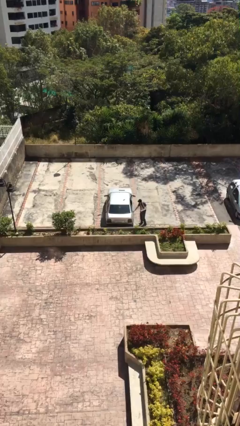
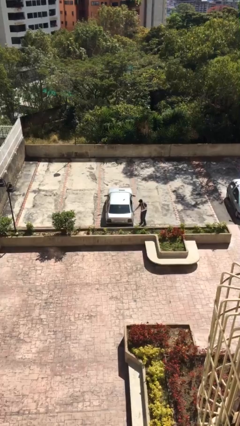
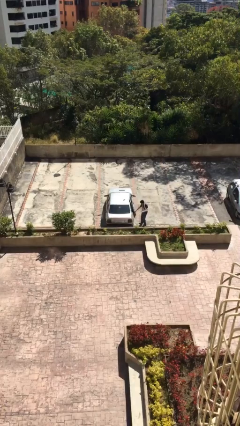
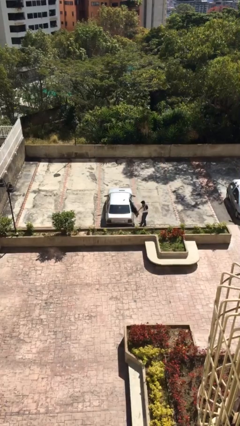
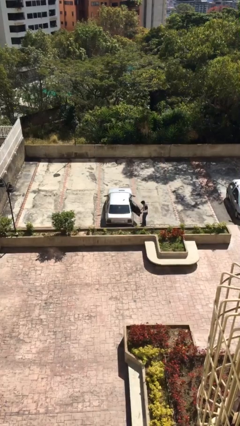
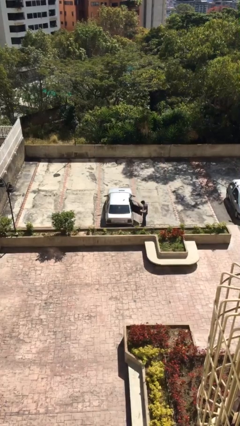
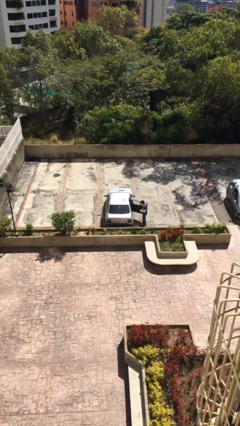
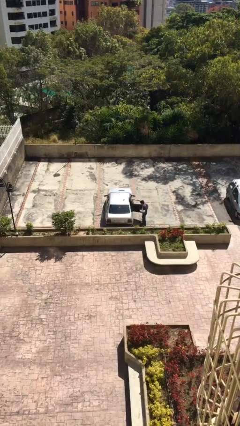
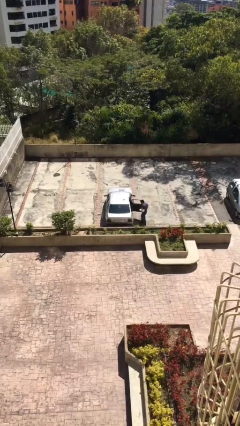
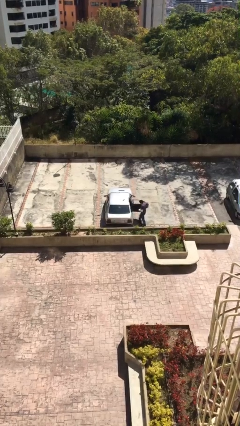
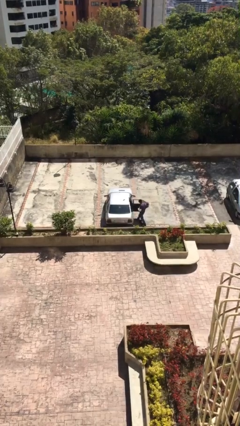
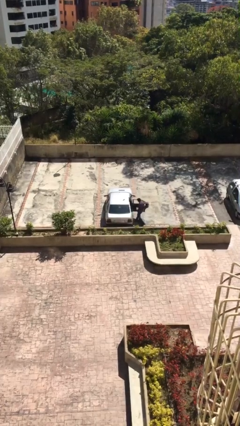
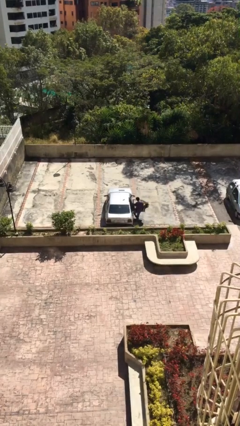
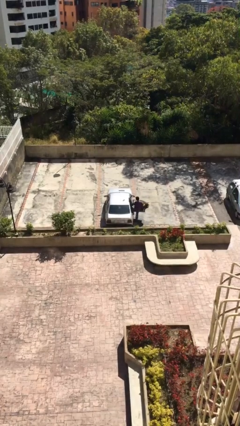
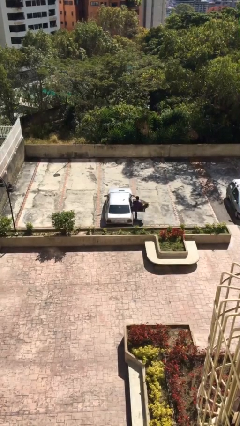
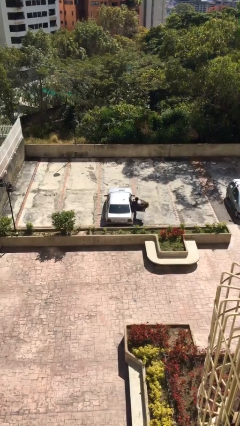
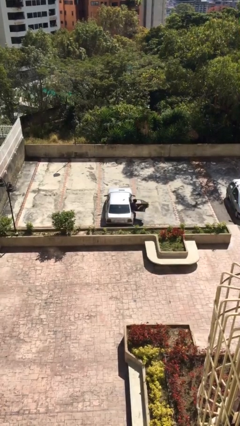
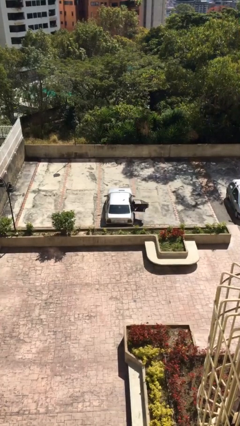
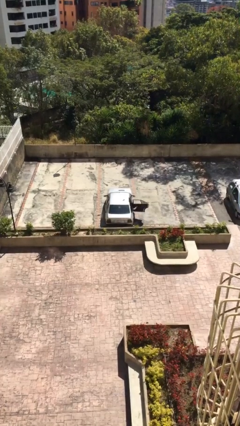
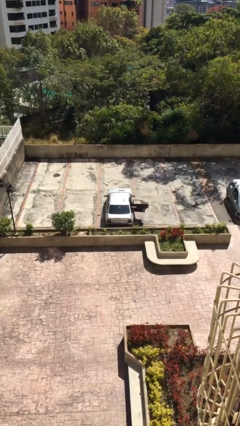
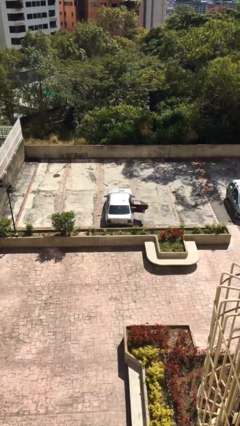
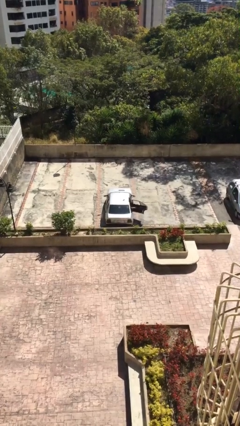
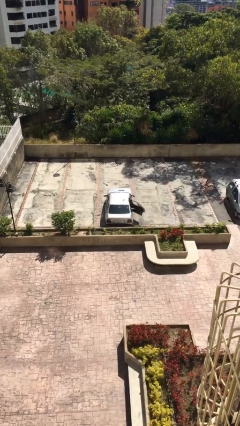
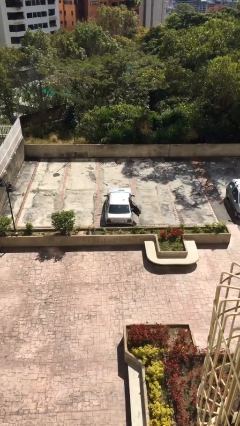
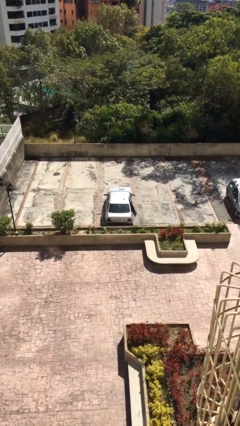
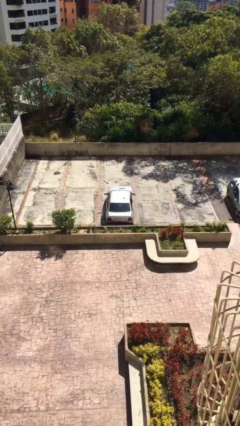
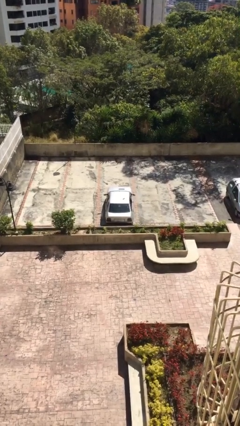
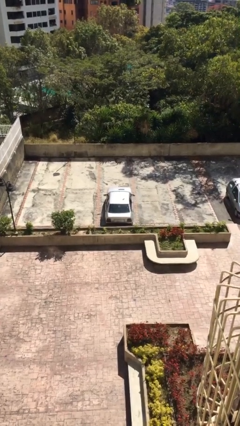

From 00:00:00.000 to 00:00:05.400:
car picks up person

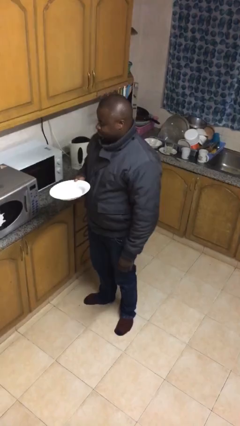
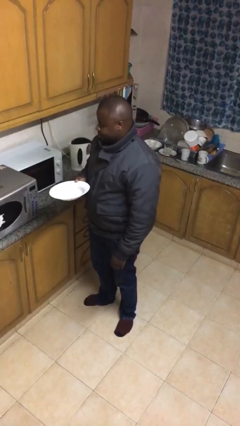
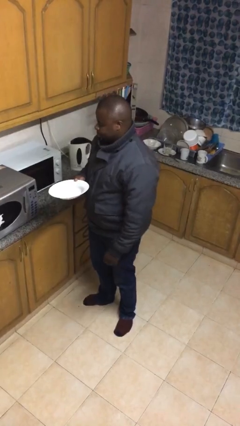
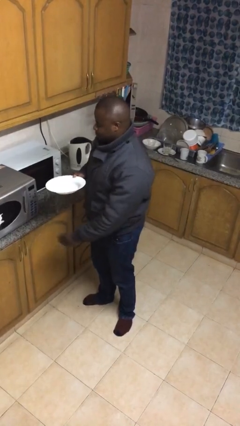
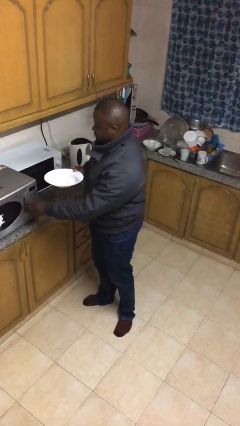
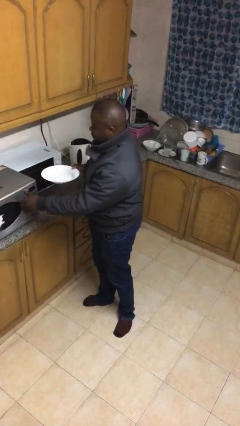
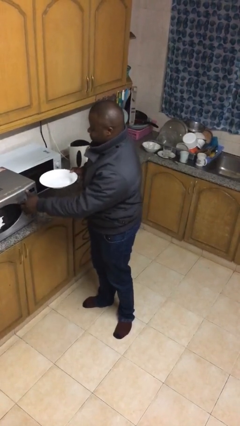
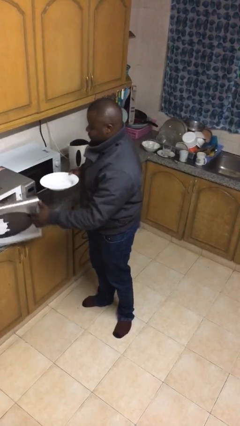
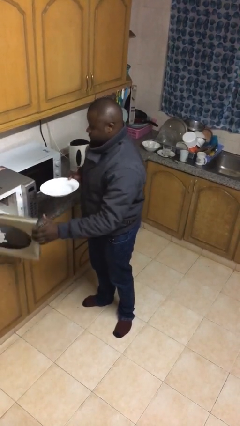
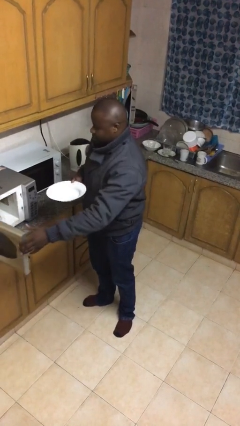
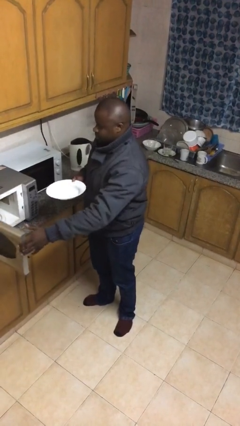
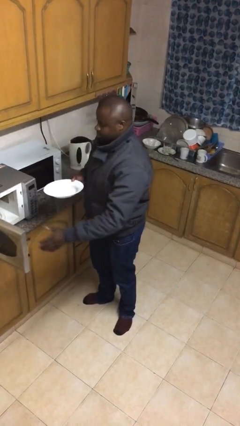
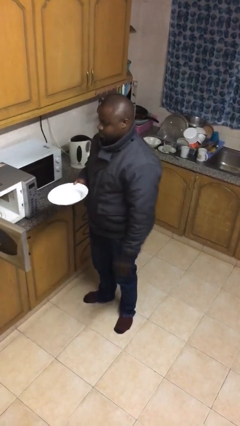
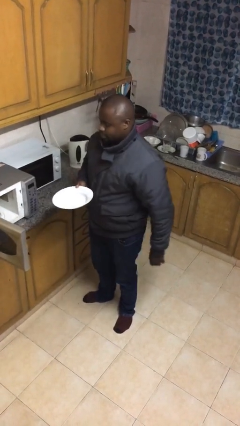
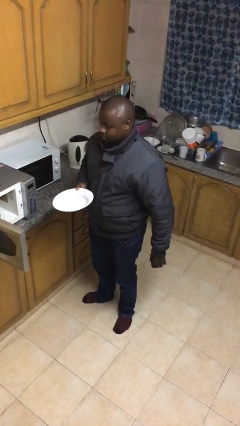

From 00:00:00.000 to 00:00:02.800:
person opens microwave

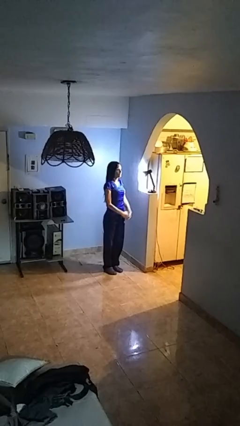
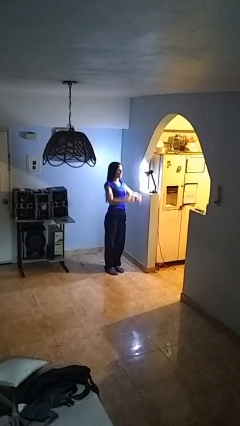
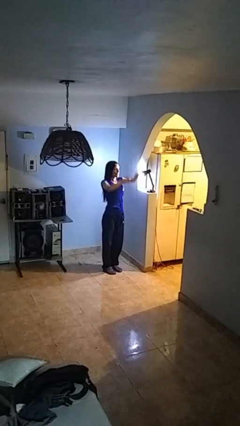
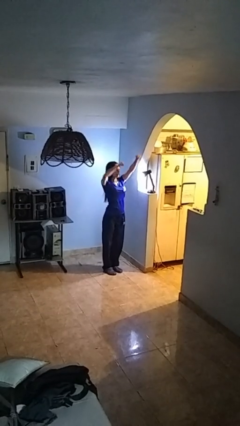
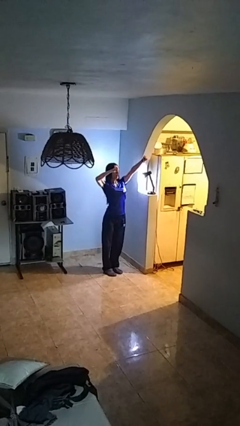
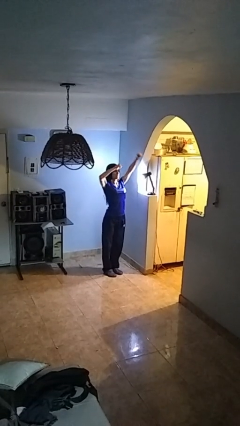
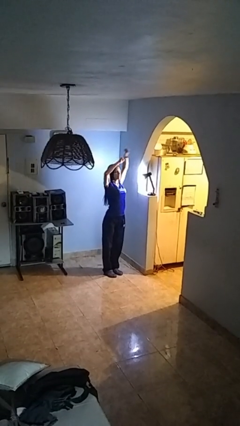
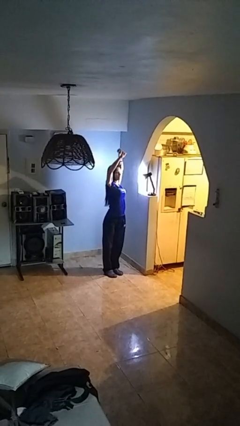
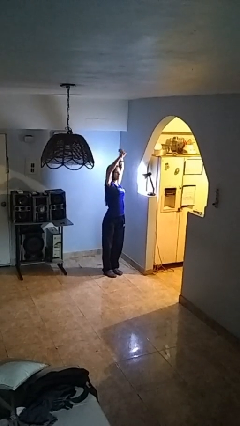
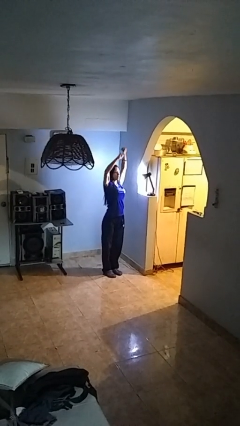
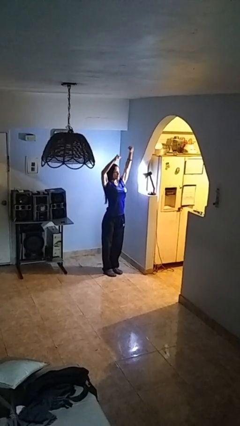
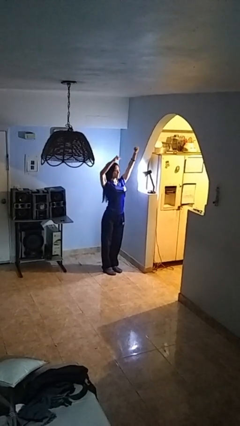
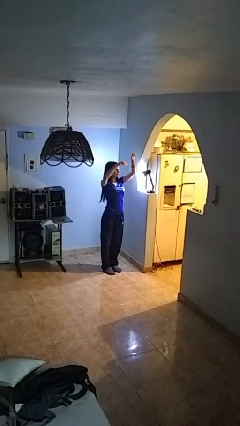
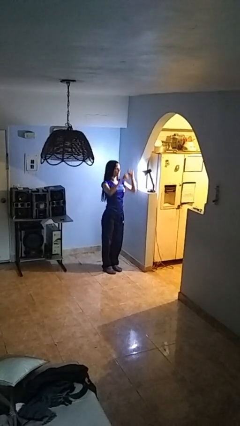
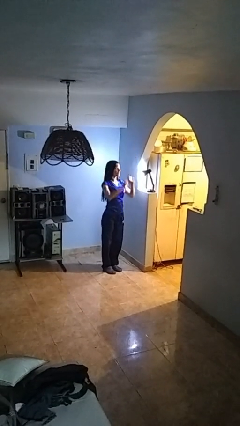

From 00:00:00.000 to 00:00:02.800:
person stretches arms over head

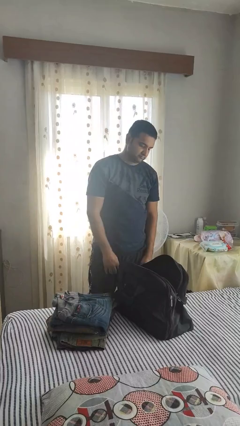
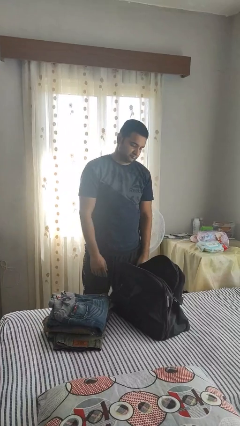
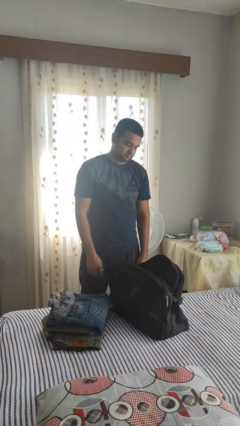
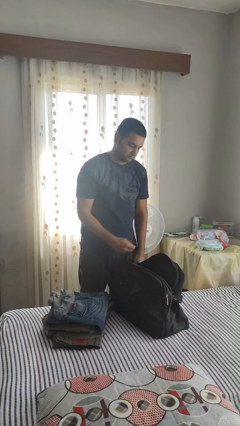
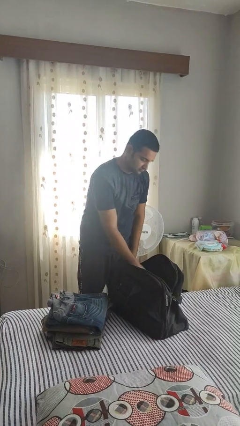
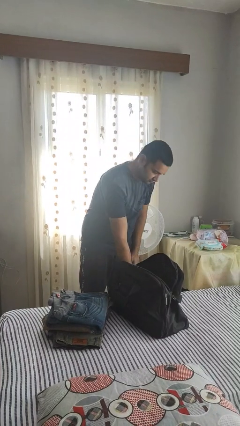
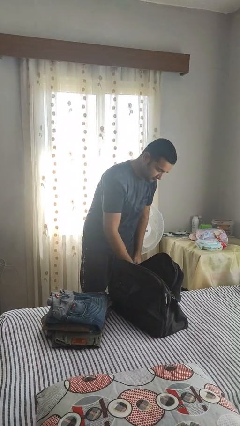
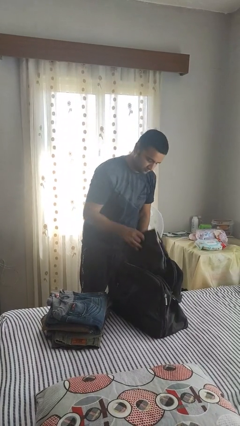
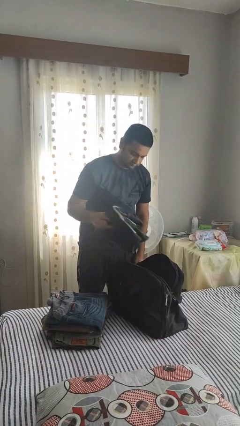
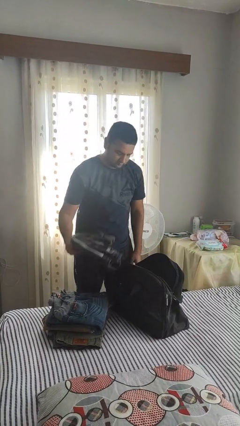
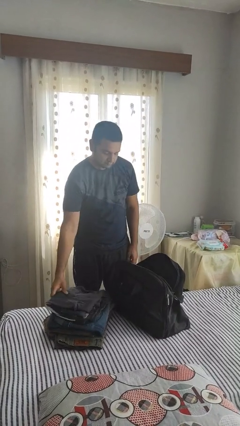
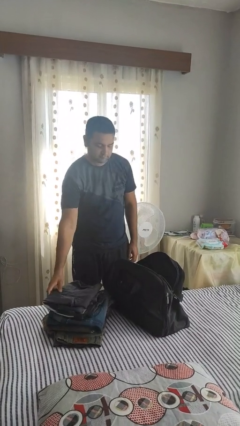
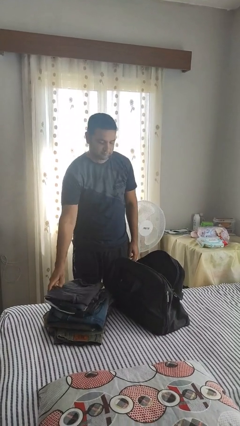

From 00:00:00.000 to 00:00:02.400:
person unloads clothes from suitcase

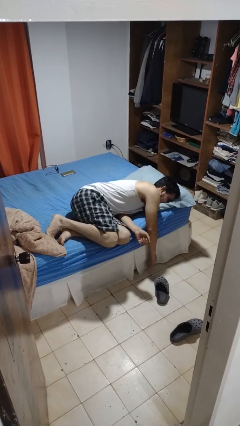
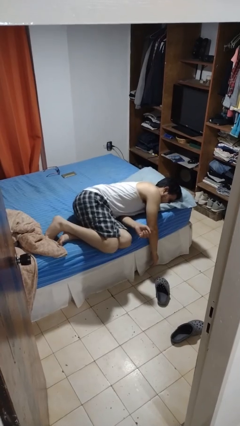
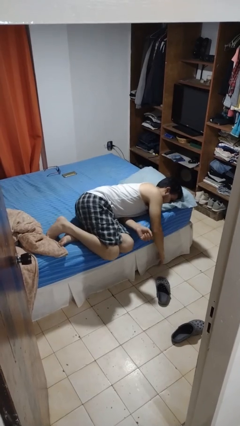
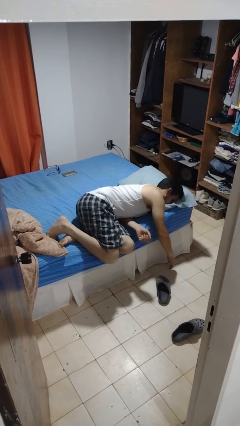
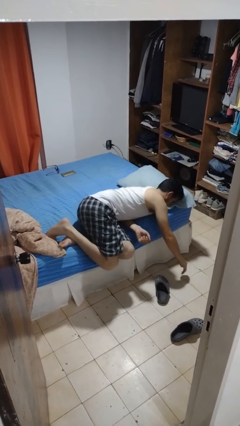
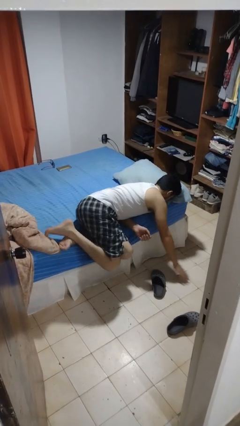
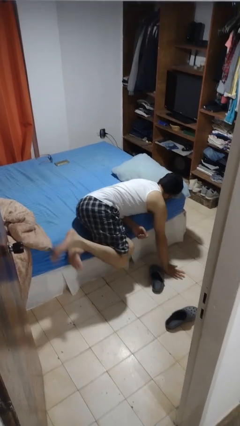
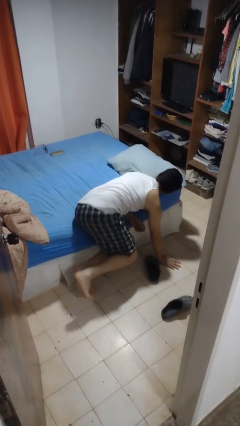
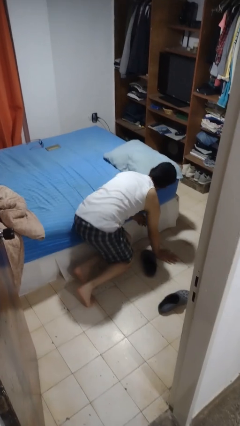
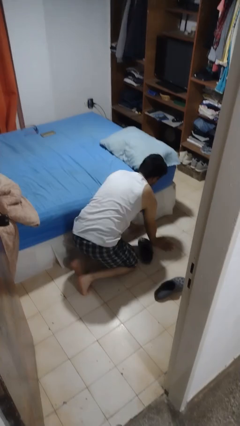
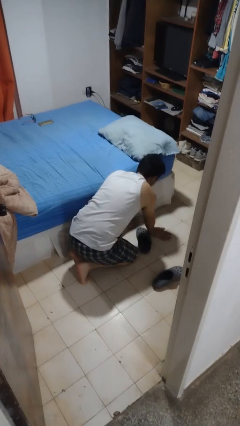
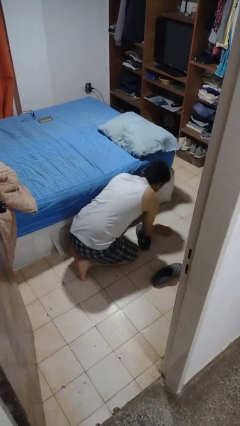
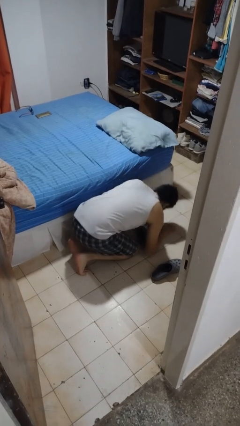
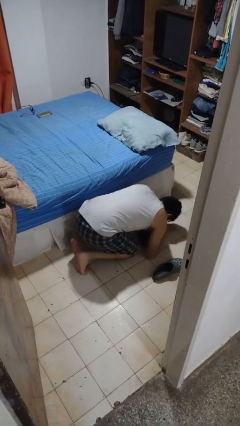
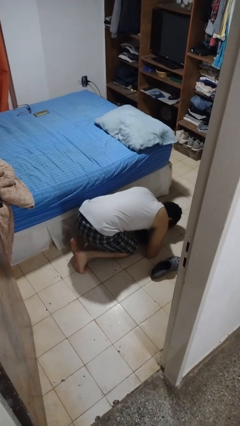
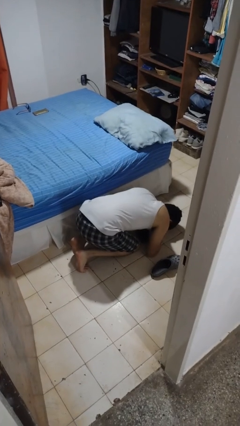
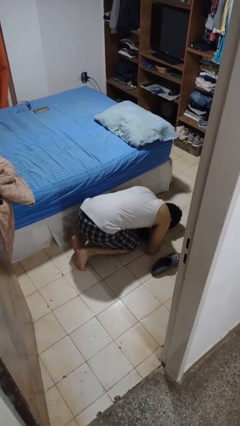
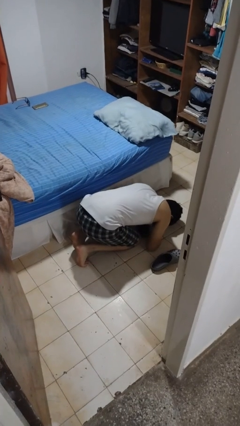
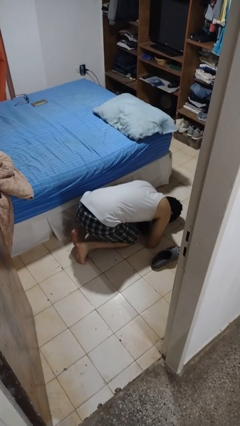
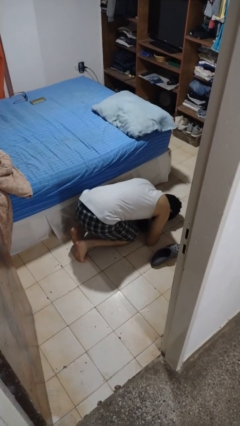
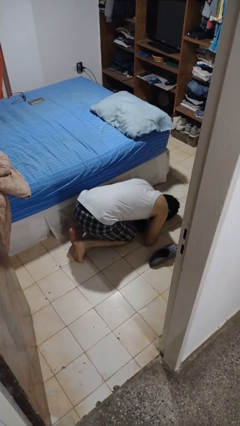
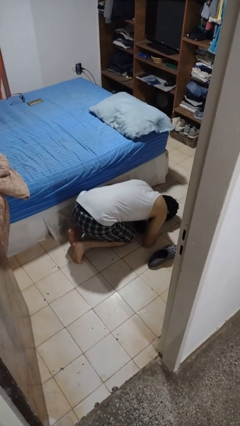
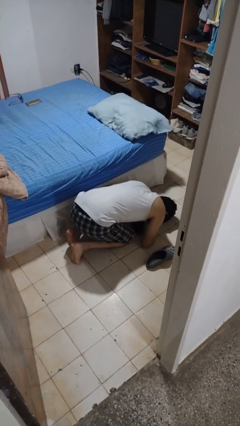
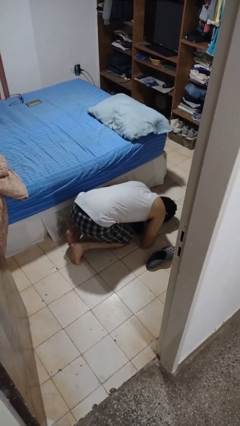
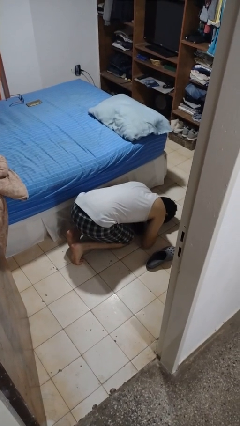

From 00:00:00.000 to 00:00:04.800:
person falls from bed
